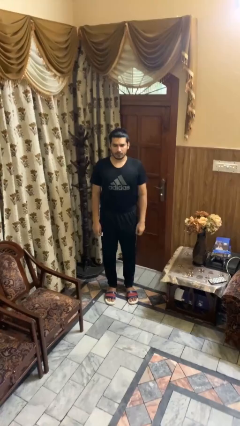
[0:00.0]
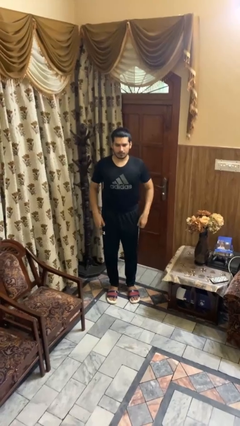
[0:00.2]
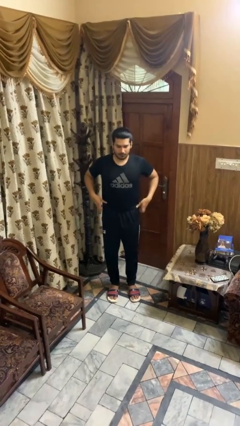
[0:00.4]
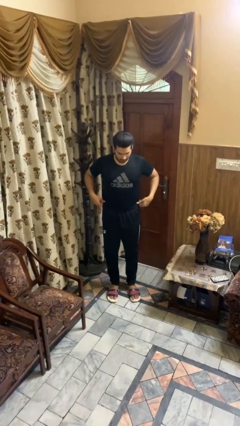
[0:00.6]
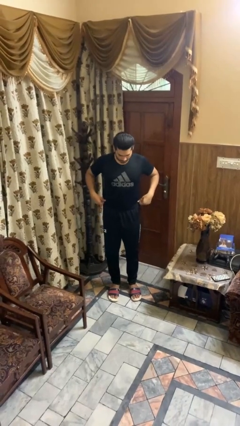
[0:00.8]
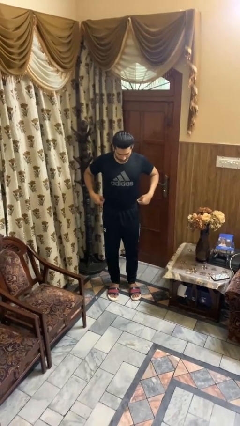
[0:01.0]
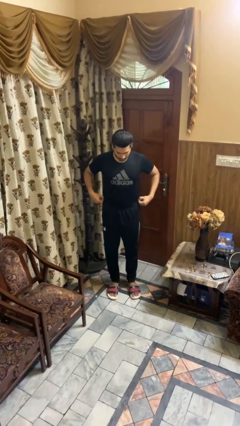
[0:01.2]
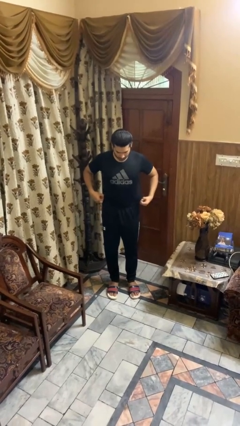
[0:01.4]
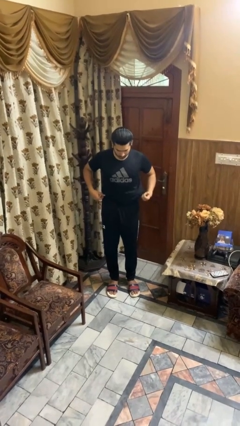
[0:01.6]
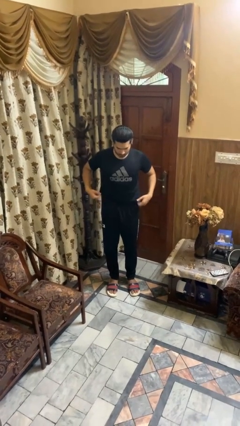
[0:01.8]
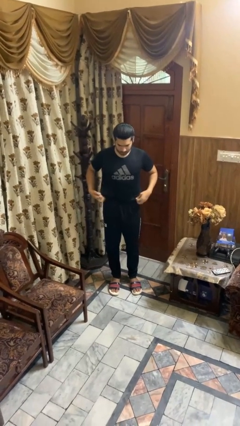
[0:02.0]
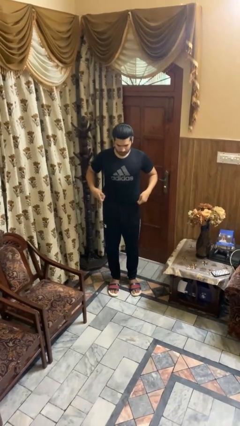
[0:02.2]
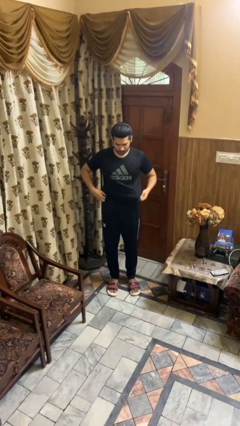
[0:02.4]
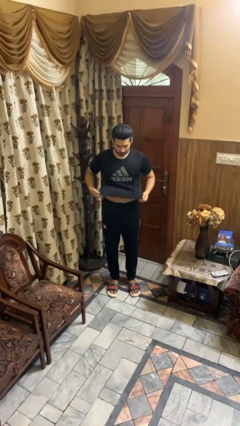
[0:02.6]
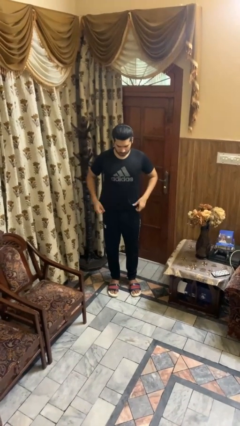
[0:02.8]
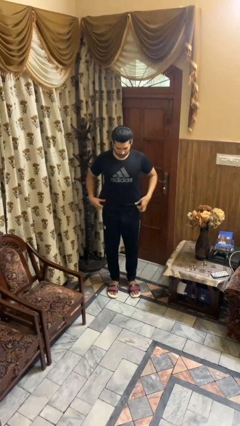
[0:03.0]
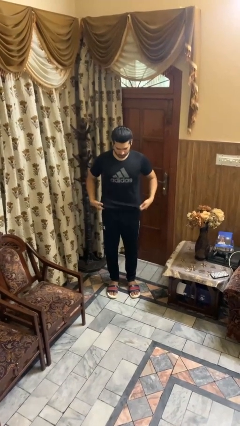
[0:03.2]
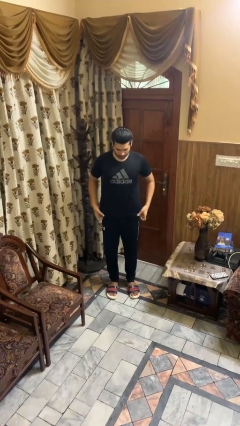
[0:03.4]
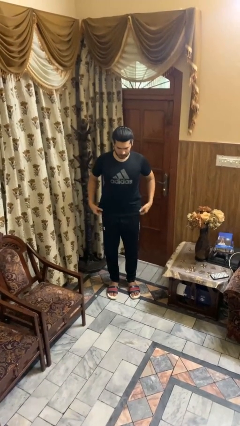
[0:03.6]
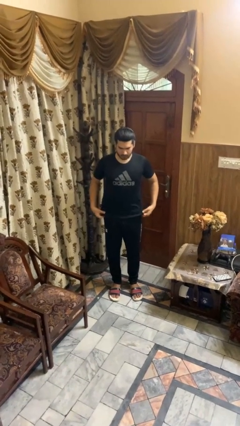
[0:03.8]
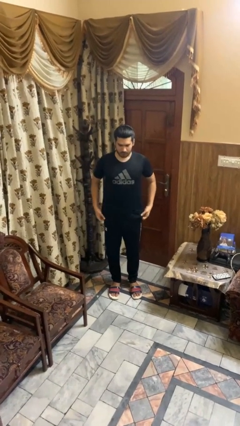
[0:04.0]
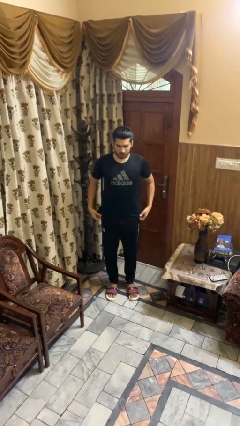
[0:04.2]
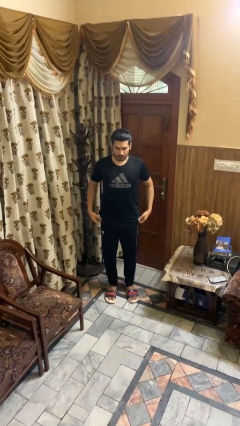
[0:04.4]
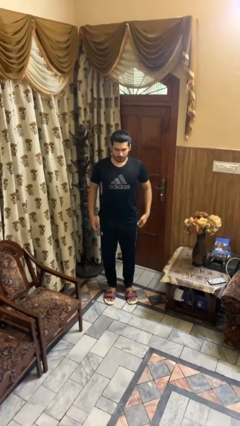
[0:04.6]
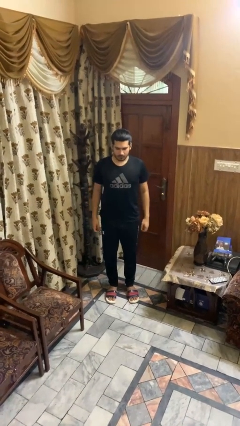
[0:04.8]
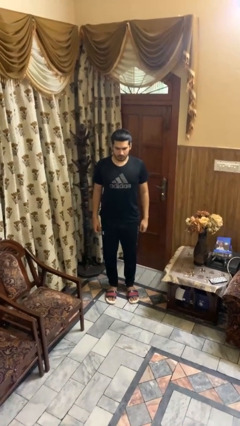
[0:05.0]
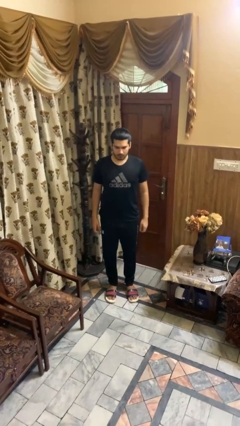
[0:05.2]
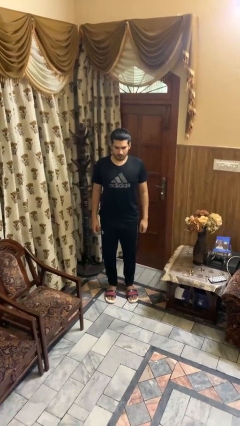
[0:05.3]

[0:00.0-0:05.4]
person untucks shirt

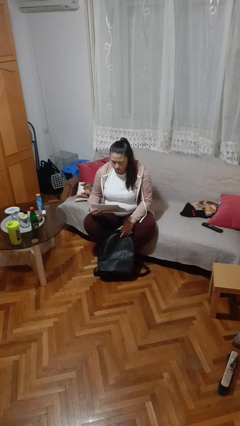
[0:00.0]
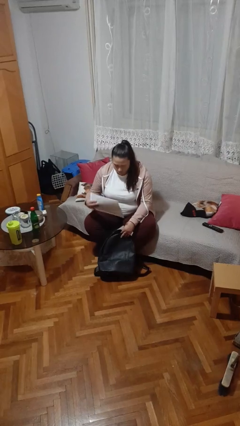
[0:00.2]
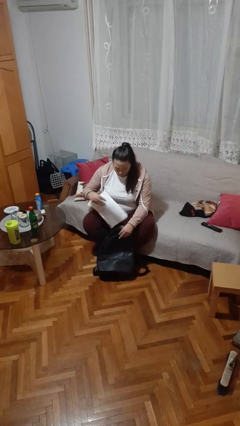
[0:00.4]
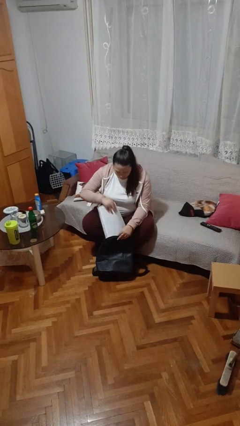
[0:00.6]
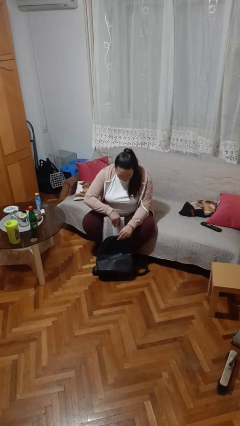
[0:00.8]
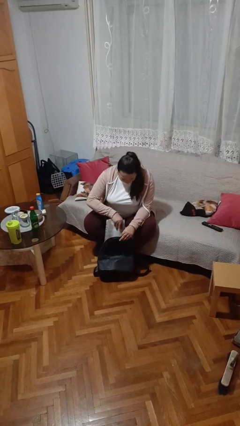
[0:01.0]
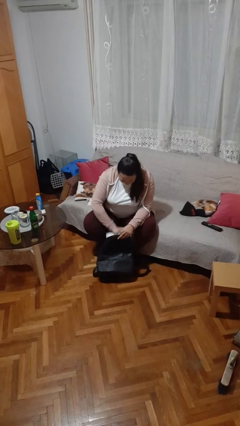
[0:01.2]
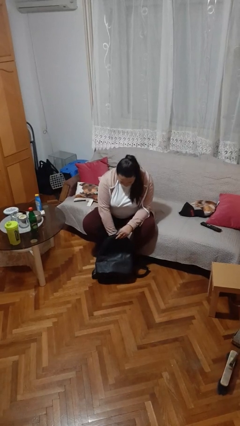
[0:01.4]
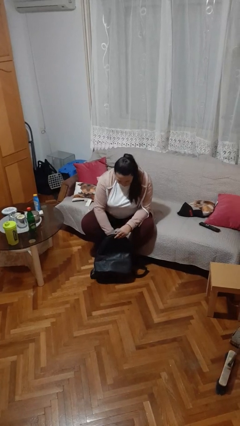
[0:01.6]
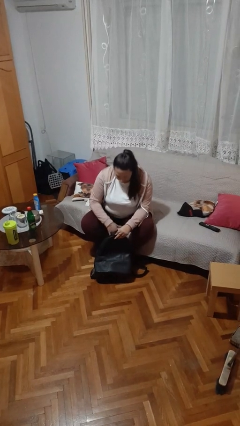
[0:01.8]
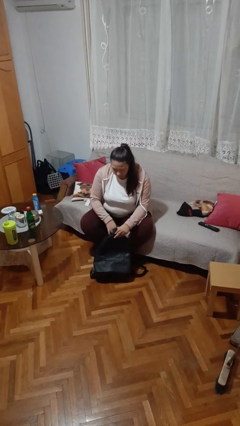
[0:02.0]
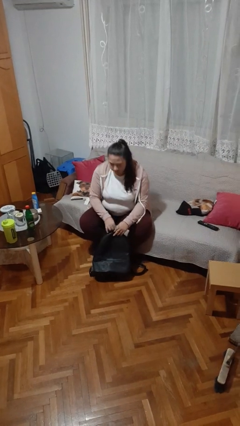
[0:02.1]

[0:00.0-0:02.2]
person puts object into backpack

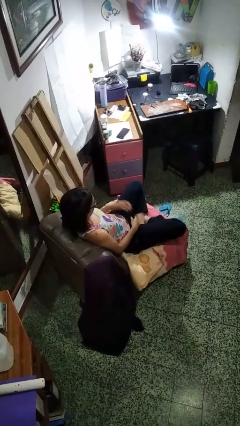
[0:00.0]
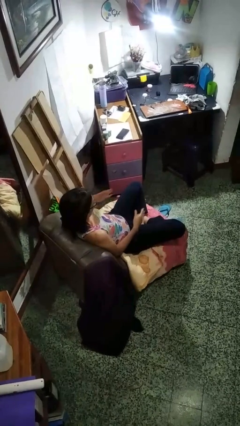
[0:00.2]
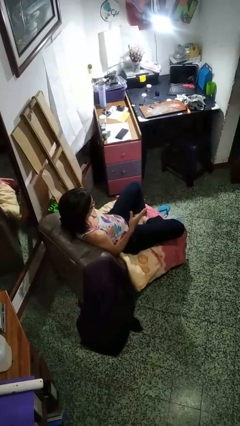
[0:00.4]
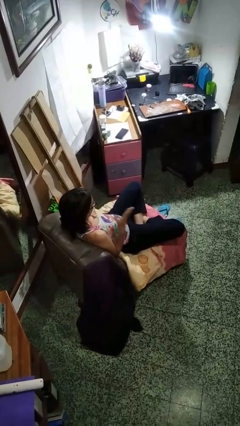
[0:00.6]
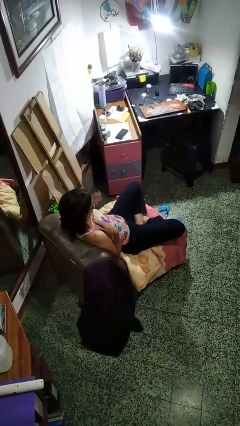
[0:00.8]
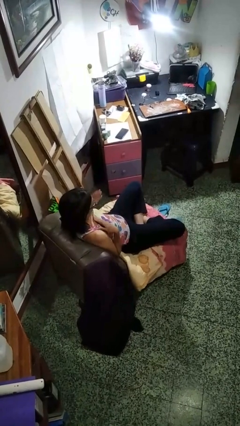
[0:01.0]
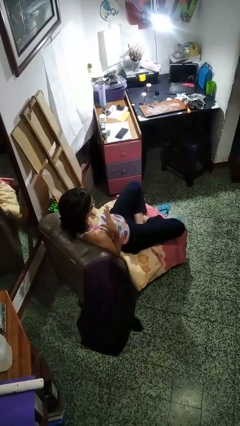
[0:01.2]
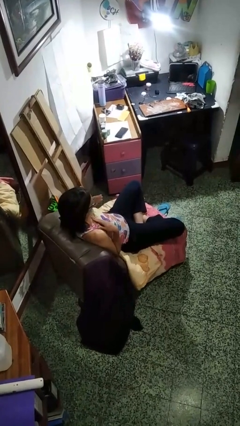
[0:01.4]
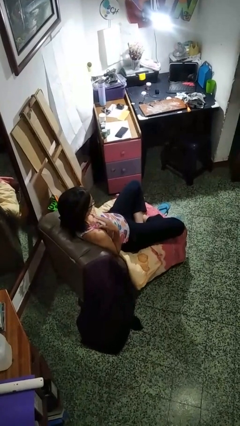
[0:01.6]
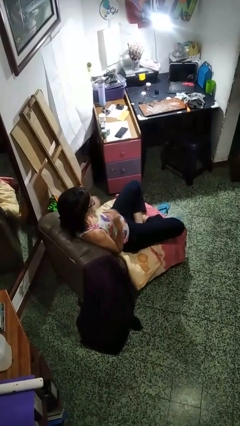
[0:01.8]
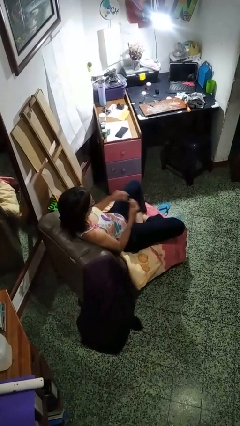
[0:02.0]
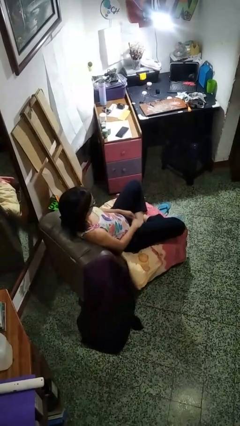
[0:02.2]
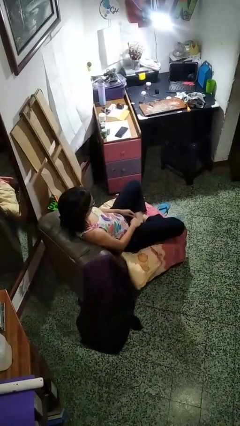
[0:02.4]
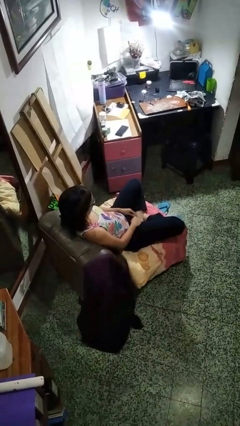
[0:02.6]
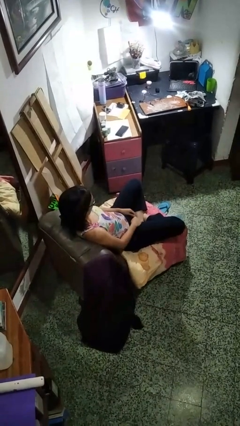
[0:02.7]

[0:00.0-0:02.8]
person drums on chest

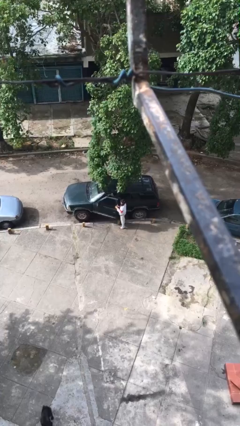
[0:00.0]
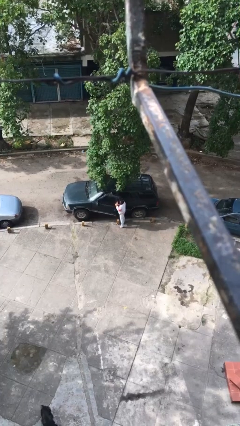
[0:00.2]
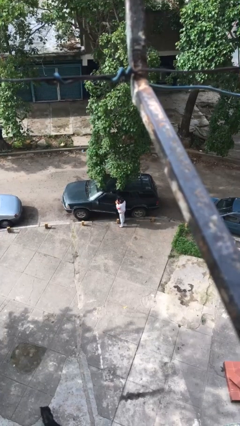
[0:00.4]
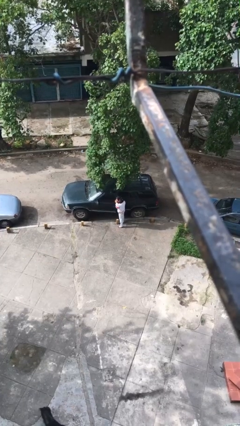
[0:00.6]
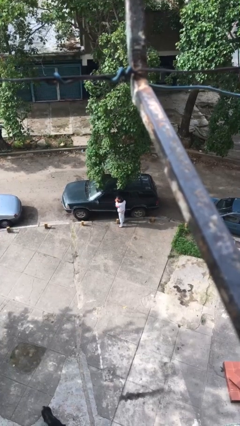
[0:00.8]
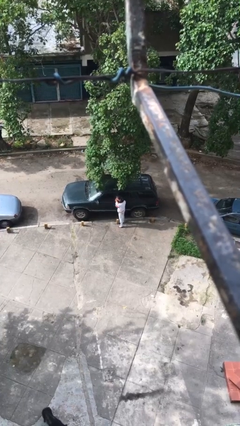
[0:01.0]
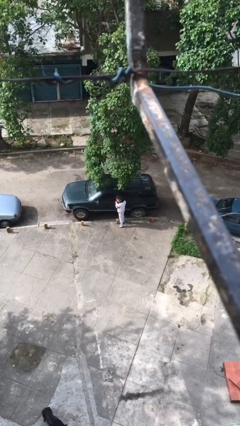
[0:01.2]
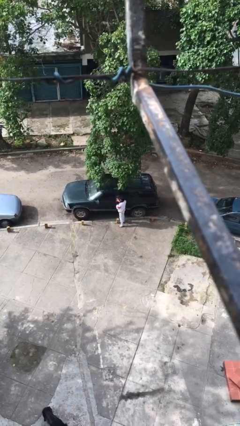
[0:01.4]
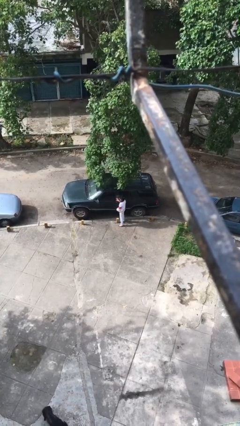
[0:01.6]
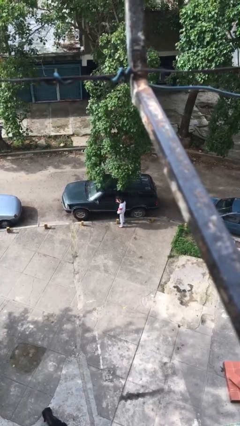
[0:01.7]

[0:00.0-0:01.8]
person closes car door

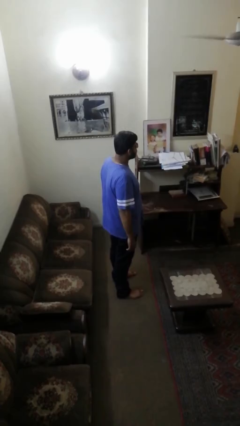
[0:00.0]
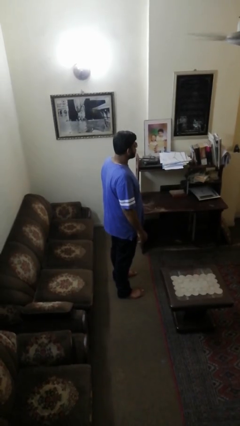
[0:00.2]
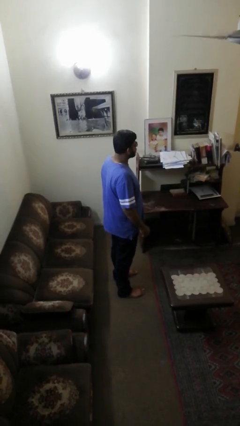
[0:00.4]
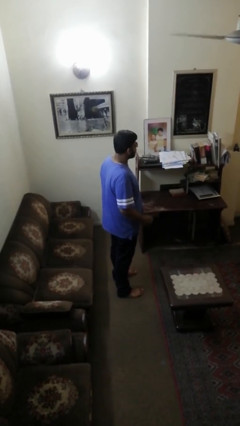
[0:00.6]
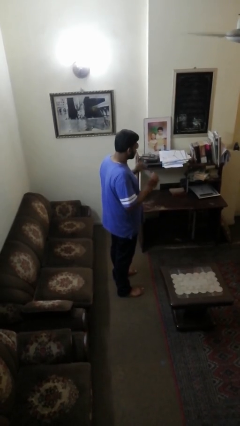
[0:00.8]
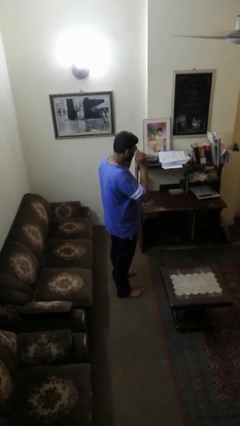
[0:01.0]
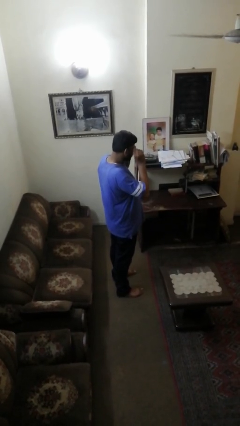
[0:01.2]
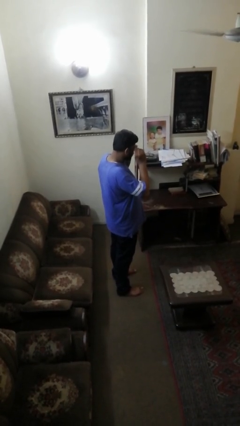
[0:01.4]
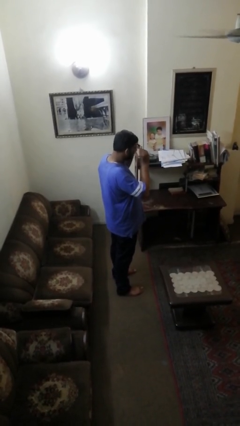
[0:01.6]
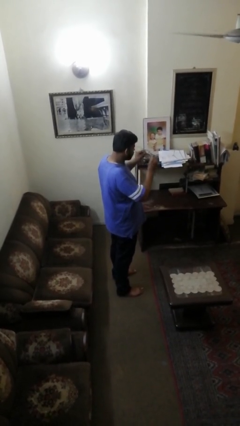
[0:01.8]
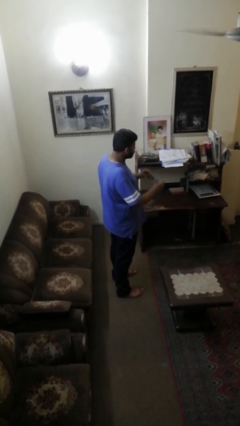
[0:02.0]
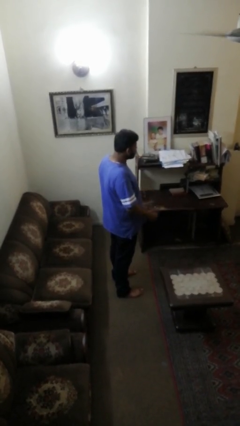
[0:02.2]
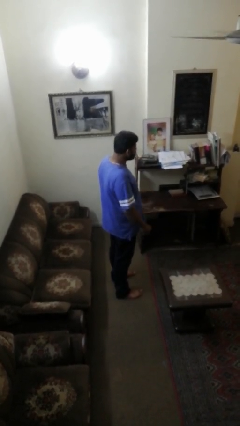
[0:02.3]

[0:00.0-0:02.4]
person takes off sunglasses

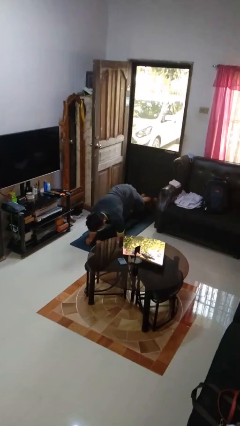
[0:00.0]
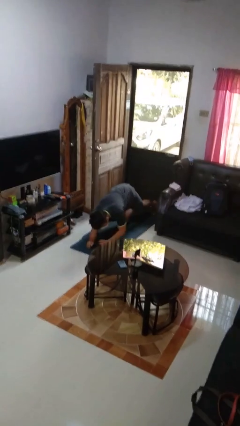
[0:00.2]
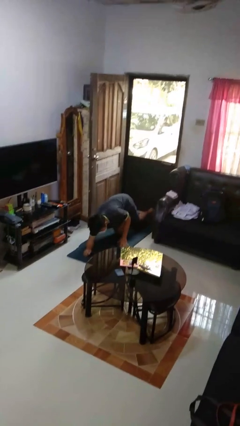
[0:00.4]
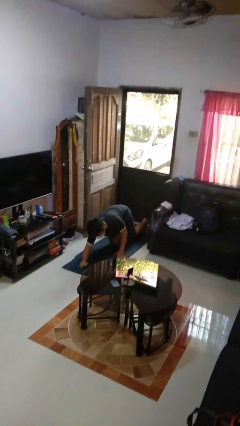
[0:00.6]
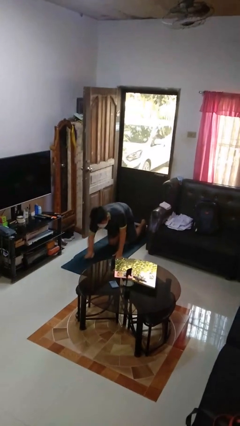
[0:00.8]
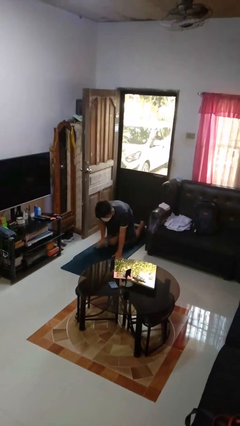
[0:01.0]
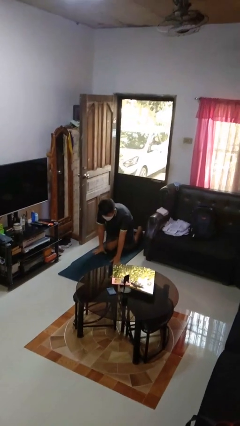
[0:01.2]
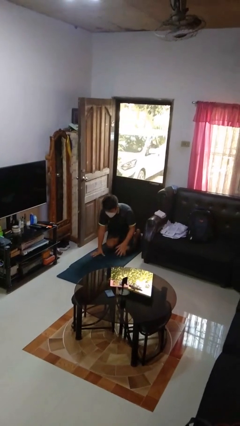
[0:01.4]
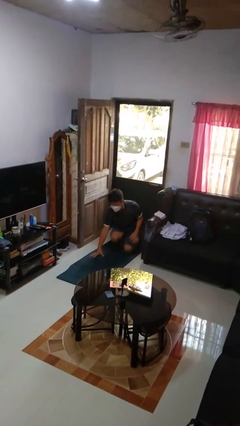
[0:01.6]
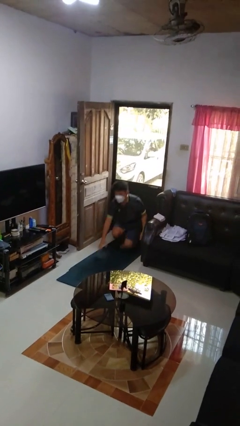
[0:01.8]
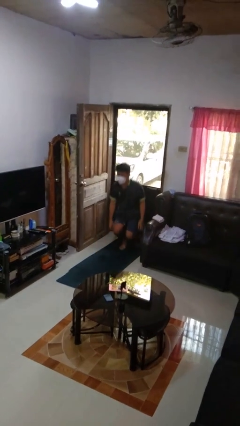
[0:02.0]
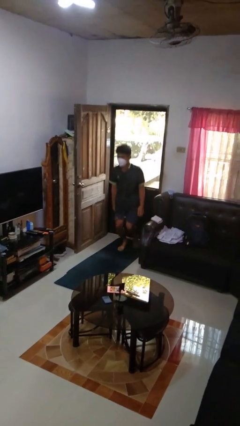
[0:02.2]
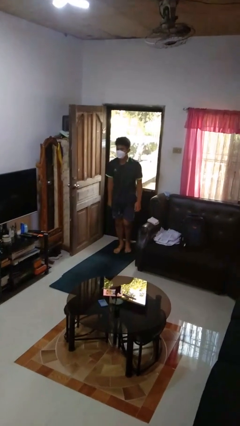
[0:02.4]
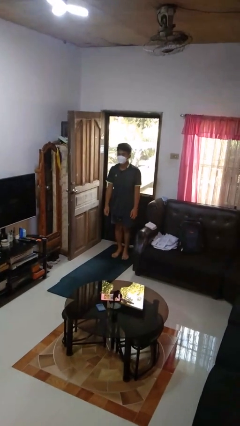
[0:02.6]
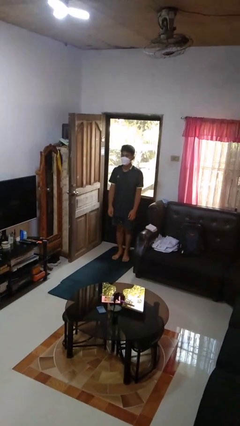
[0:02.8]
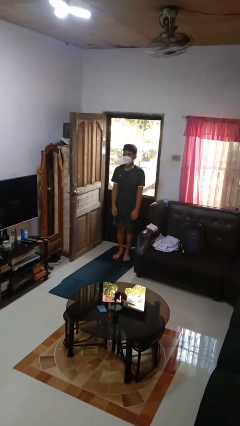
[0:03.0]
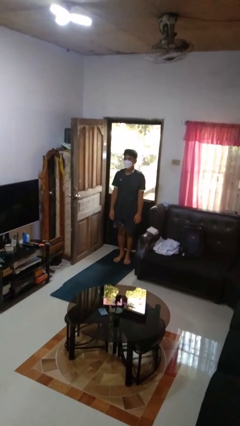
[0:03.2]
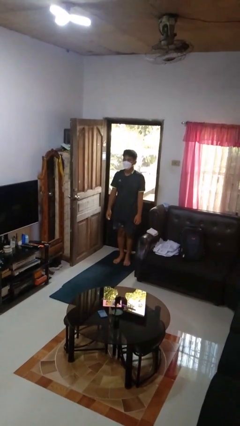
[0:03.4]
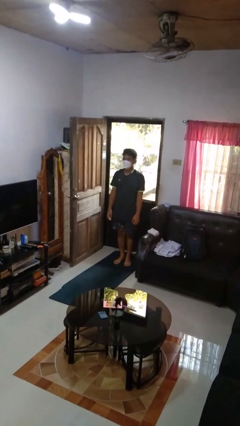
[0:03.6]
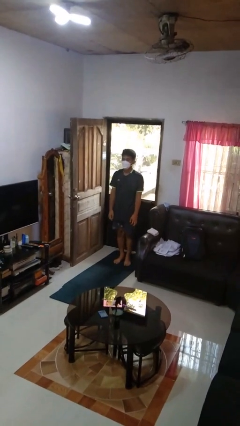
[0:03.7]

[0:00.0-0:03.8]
person stands up from floor
